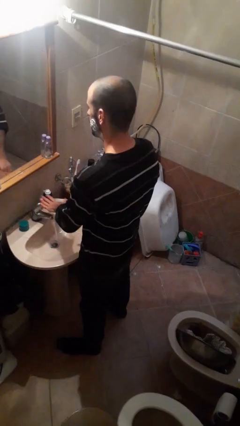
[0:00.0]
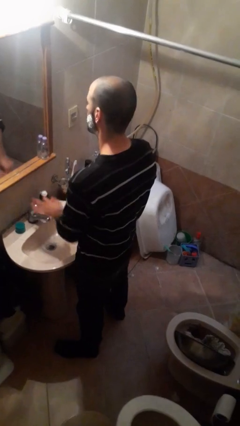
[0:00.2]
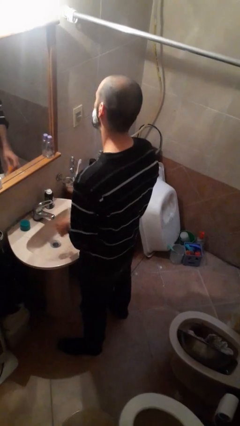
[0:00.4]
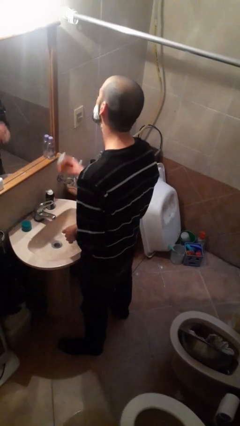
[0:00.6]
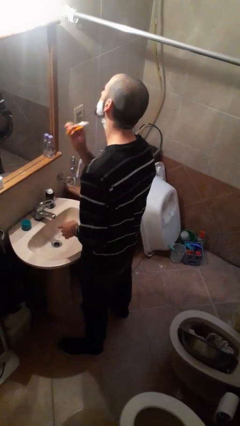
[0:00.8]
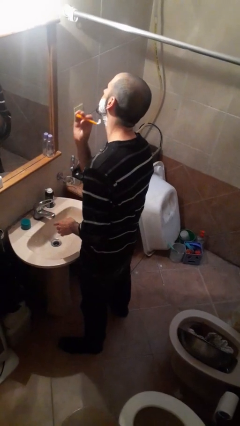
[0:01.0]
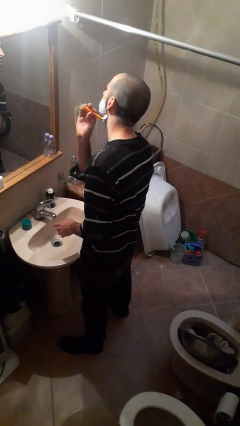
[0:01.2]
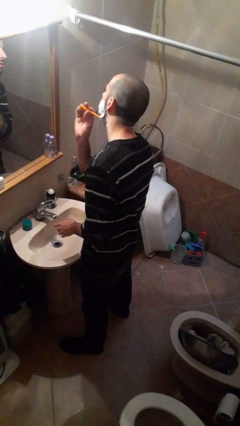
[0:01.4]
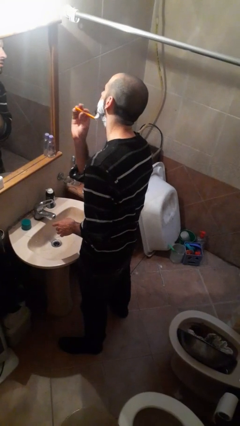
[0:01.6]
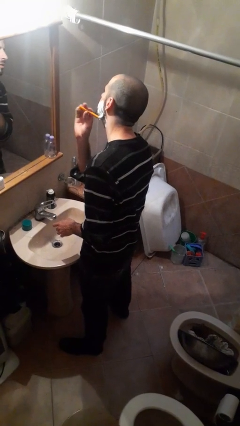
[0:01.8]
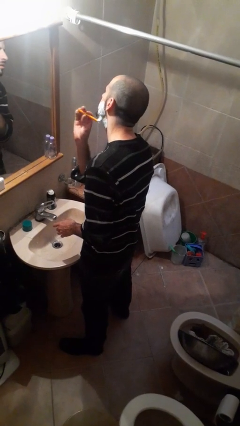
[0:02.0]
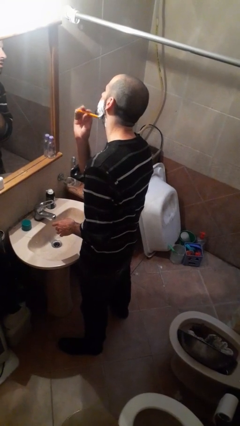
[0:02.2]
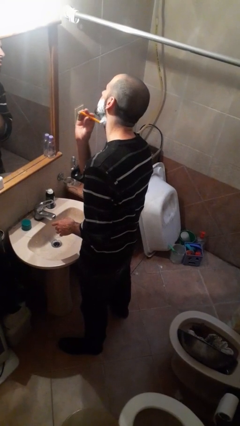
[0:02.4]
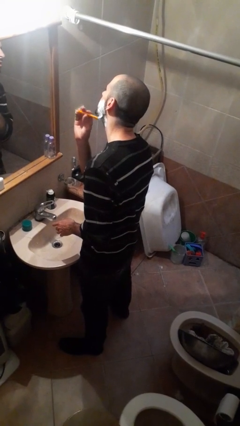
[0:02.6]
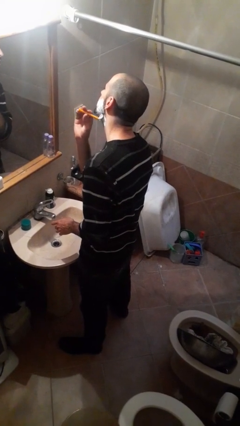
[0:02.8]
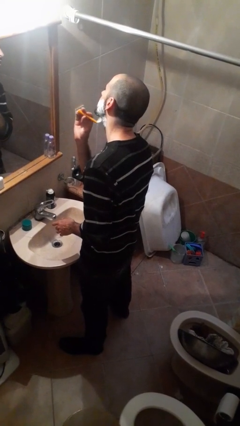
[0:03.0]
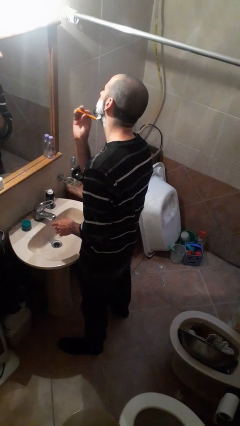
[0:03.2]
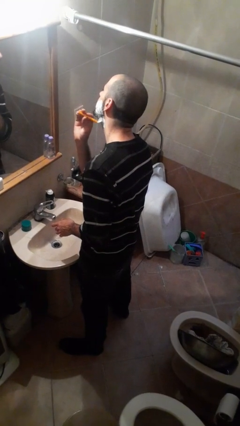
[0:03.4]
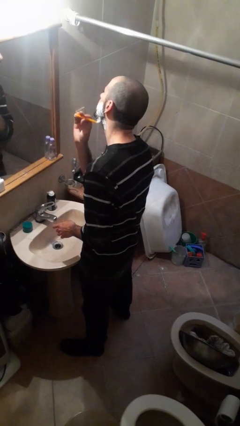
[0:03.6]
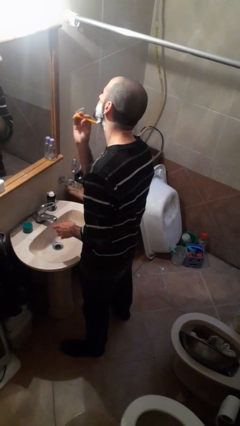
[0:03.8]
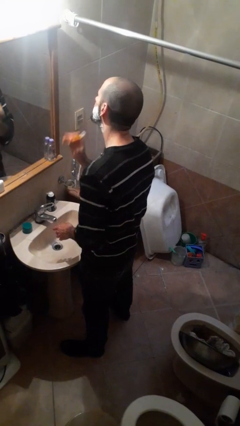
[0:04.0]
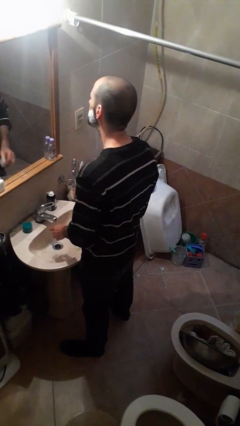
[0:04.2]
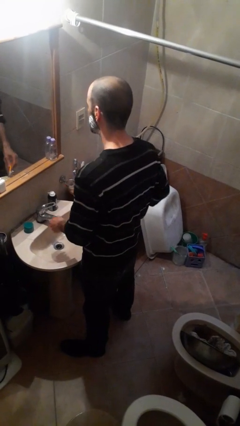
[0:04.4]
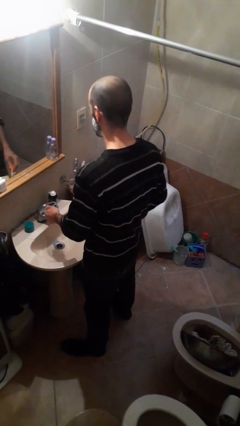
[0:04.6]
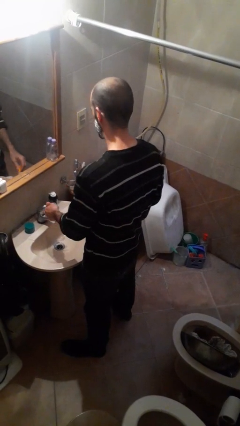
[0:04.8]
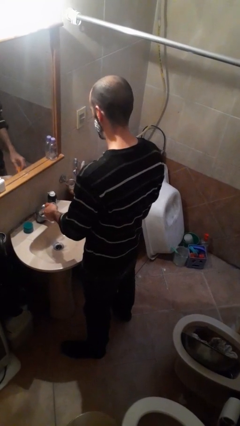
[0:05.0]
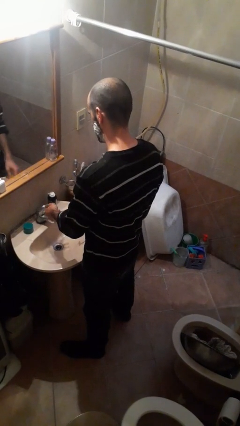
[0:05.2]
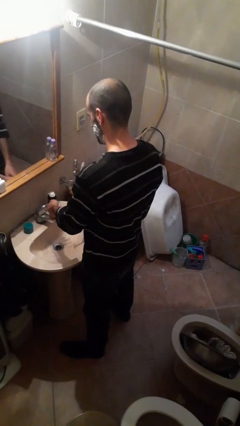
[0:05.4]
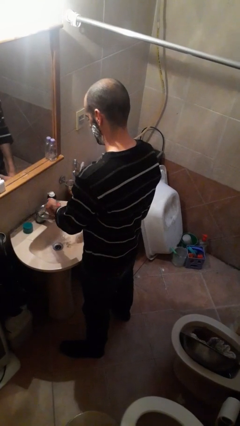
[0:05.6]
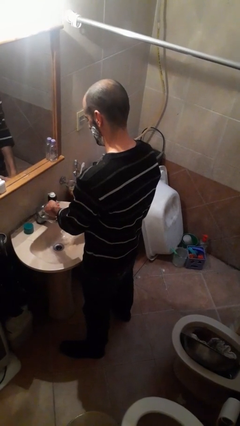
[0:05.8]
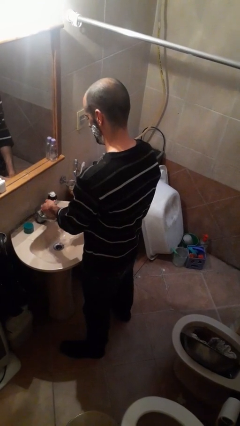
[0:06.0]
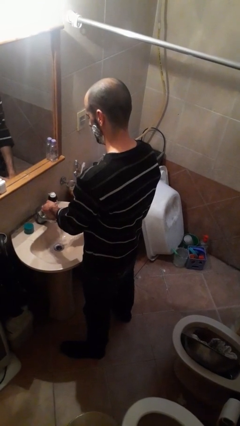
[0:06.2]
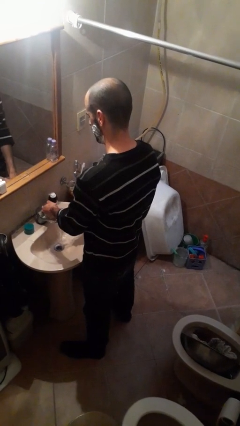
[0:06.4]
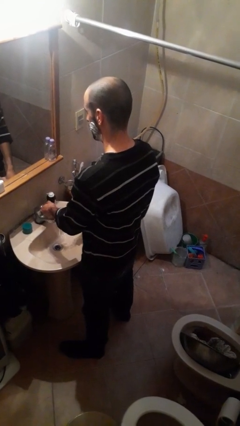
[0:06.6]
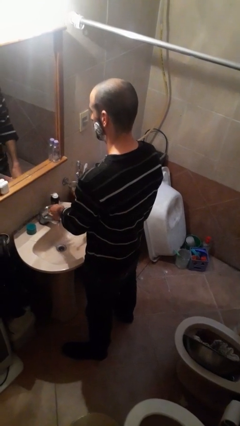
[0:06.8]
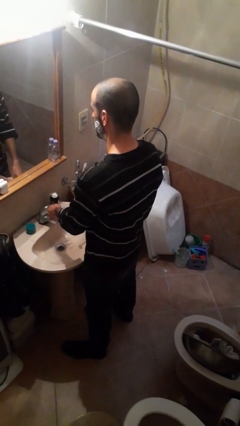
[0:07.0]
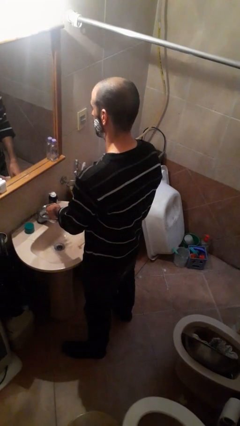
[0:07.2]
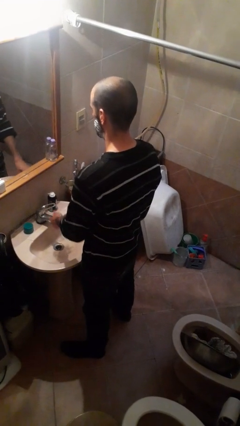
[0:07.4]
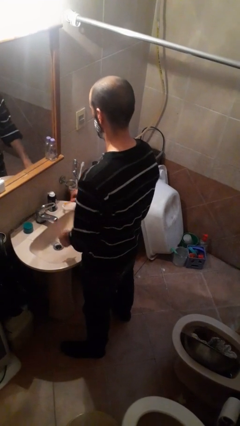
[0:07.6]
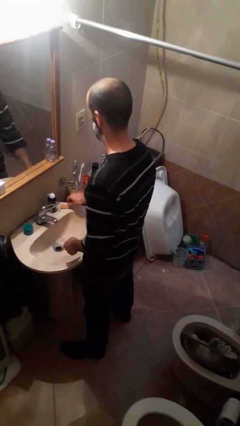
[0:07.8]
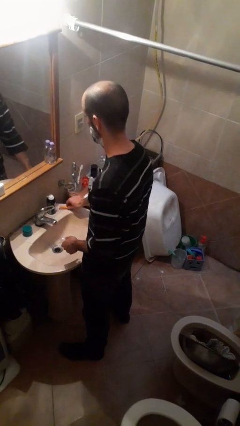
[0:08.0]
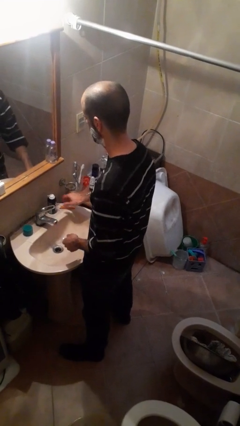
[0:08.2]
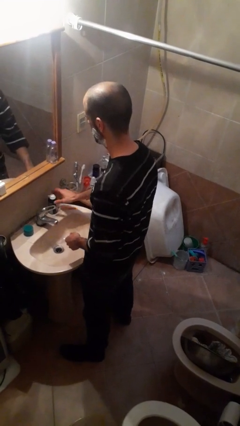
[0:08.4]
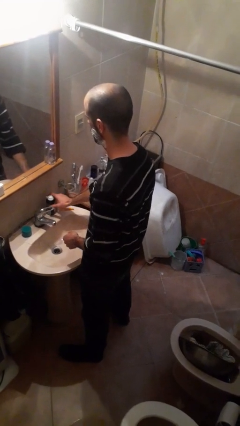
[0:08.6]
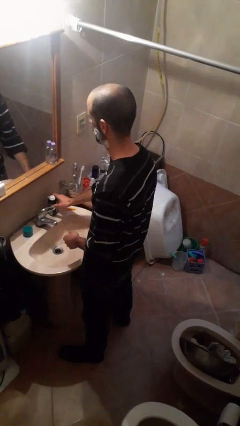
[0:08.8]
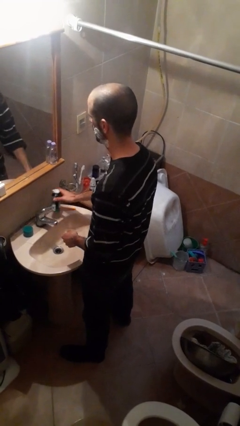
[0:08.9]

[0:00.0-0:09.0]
person shaves face

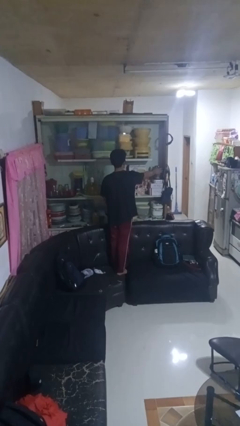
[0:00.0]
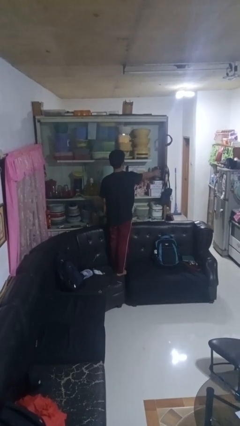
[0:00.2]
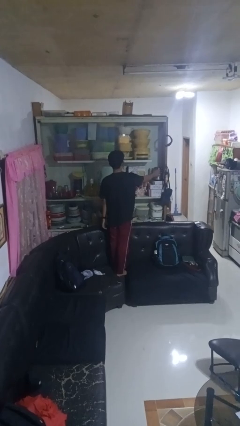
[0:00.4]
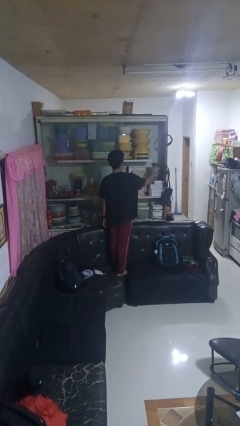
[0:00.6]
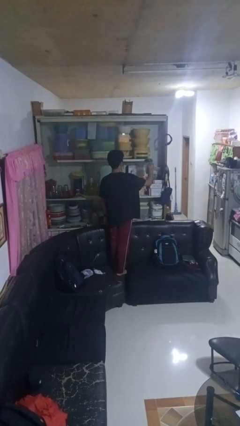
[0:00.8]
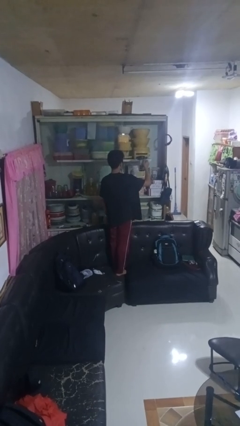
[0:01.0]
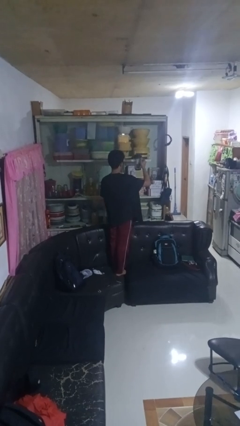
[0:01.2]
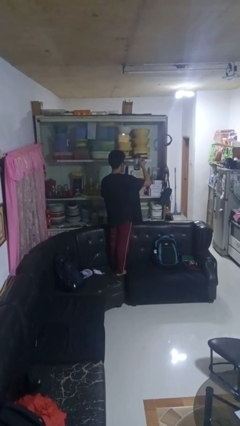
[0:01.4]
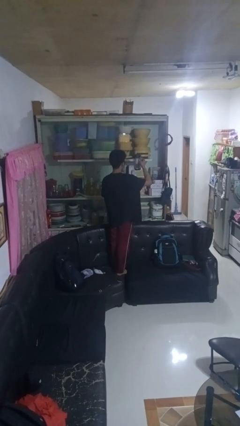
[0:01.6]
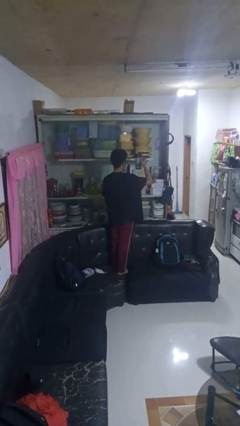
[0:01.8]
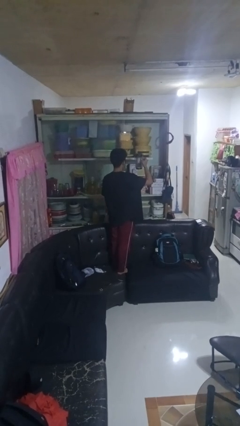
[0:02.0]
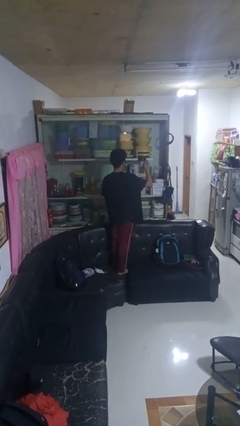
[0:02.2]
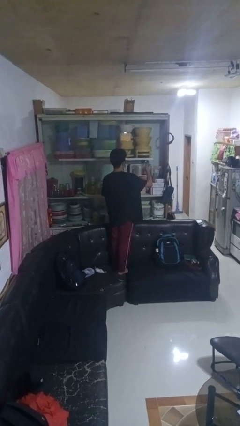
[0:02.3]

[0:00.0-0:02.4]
person picks up object from cabinet

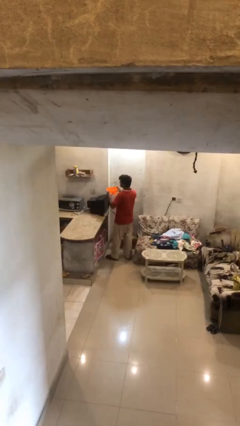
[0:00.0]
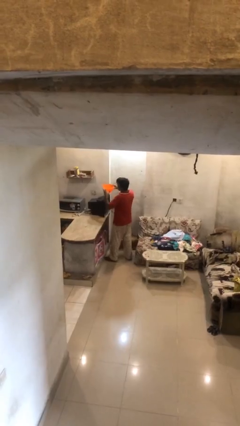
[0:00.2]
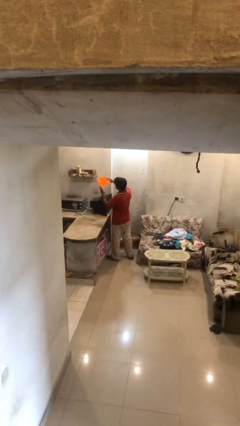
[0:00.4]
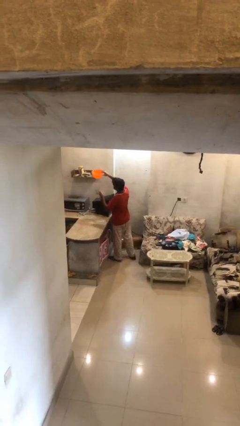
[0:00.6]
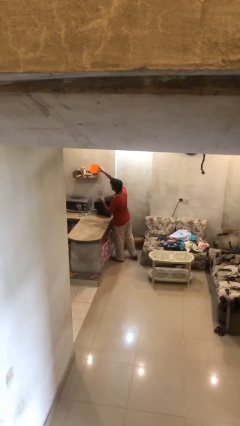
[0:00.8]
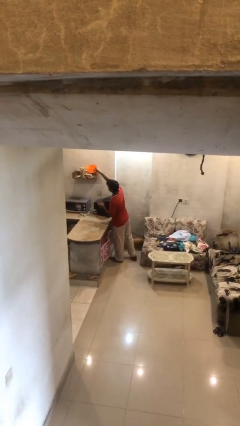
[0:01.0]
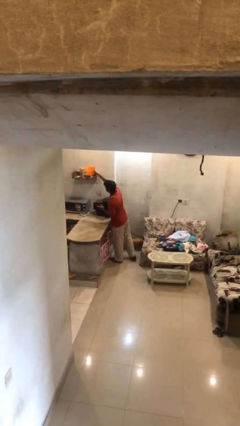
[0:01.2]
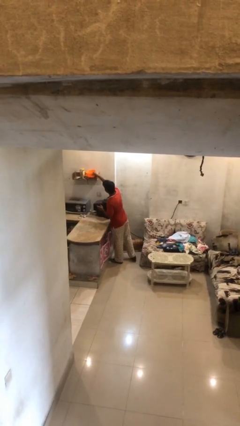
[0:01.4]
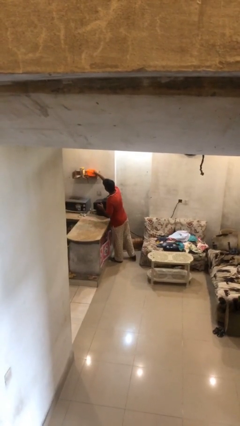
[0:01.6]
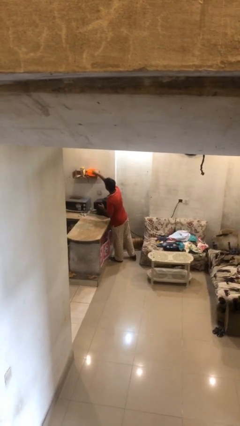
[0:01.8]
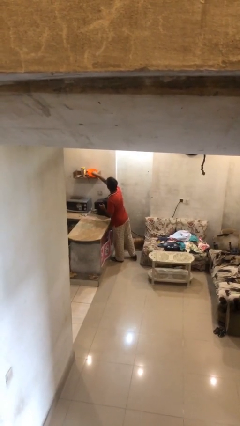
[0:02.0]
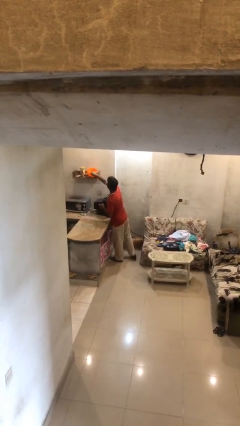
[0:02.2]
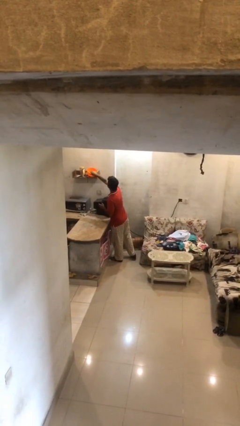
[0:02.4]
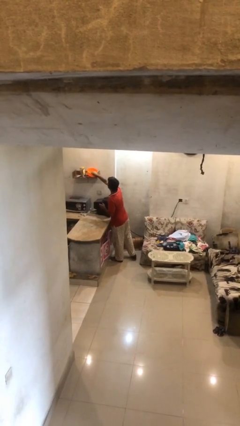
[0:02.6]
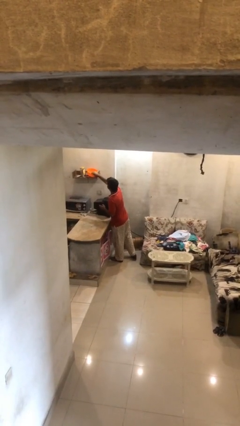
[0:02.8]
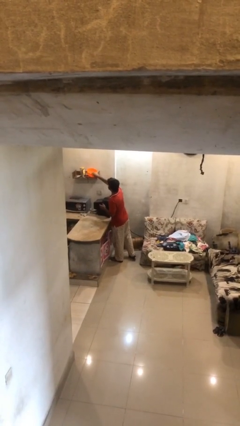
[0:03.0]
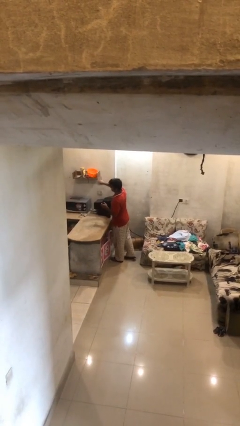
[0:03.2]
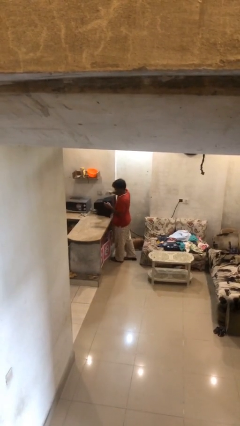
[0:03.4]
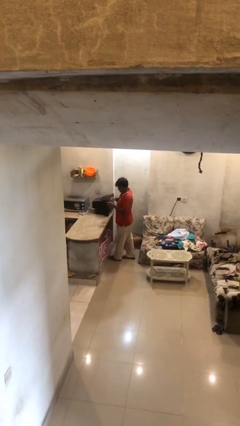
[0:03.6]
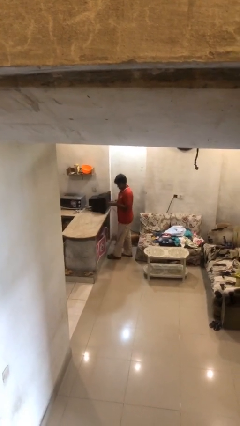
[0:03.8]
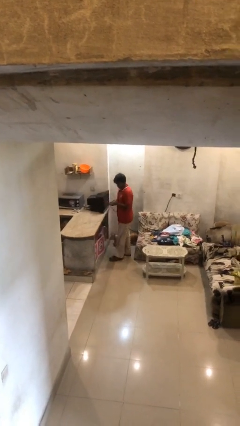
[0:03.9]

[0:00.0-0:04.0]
person puts down object on shelf

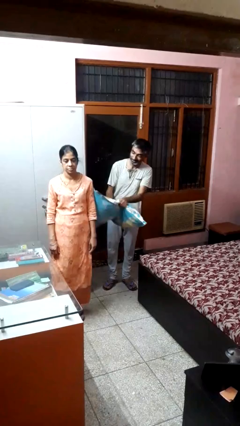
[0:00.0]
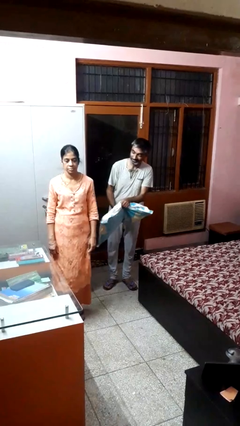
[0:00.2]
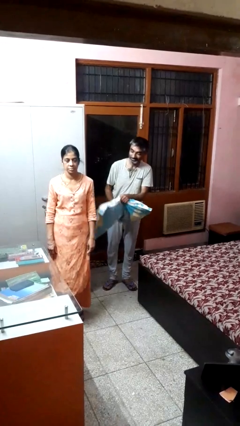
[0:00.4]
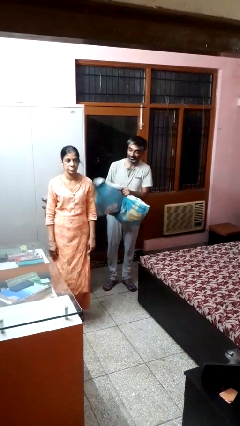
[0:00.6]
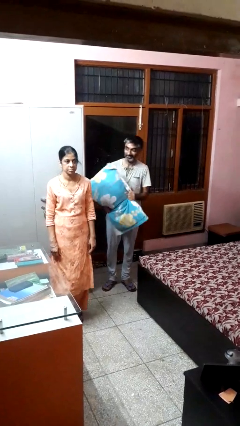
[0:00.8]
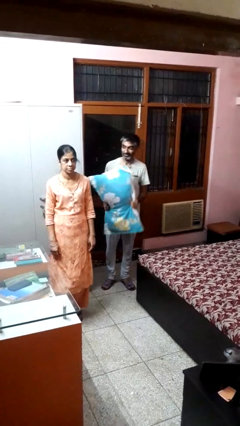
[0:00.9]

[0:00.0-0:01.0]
person hits person with pillow

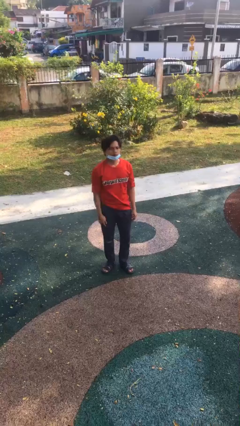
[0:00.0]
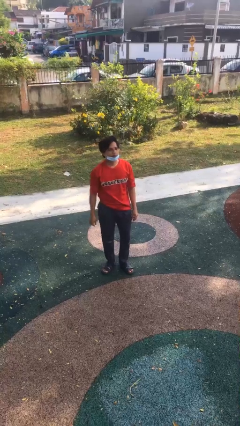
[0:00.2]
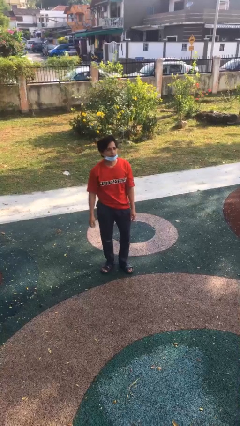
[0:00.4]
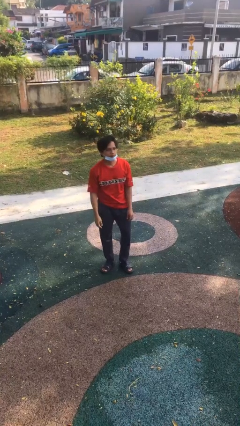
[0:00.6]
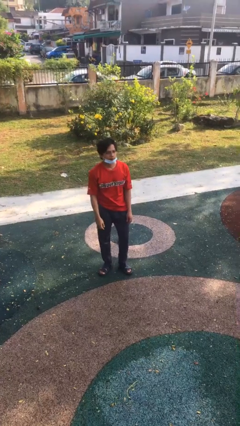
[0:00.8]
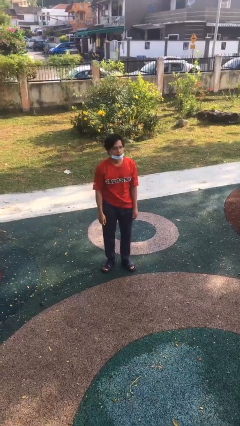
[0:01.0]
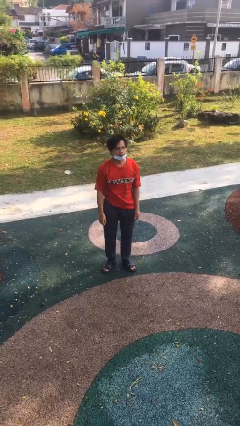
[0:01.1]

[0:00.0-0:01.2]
person gestures lower hand

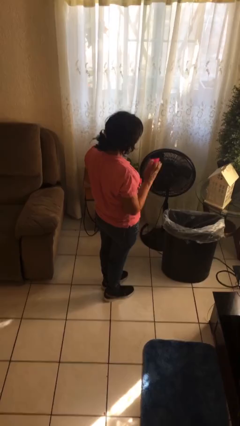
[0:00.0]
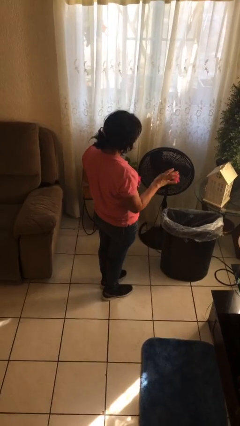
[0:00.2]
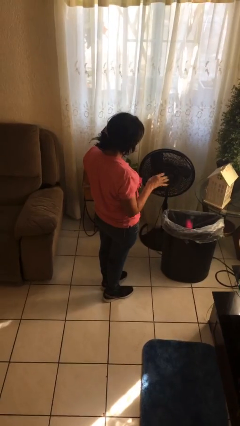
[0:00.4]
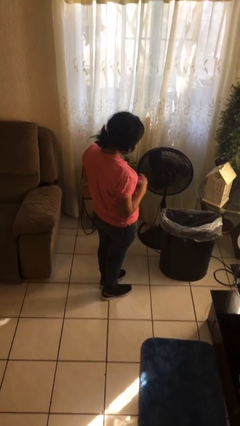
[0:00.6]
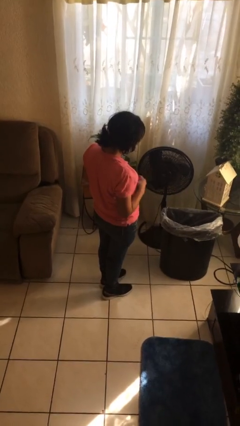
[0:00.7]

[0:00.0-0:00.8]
person discards trash
